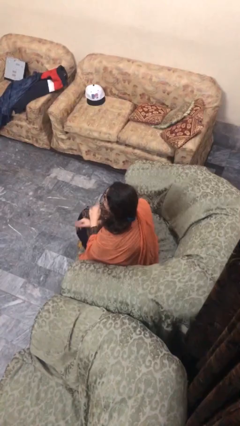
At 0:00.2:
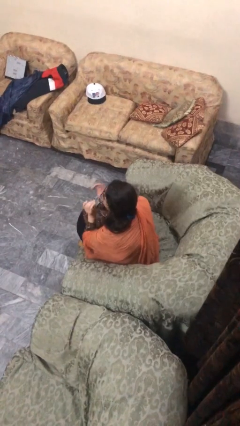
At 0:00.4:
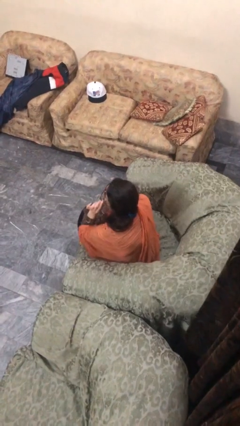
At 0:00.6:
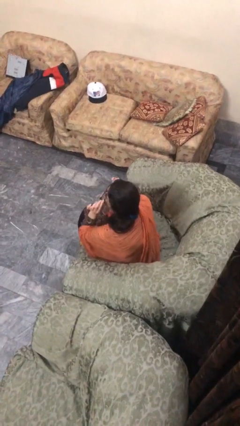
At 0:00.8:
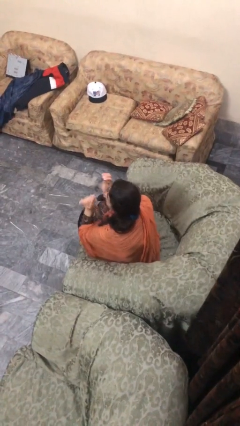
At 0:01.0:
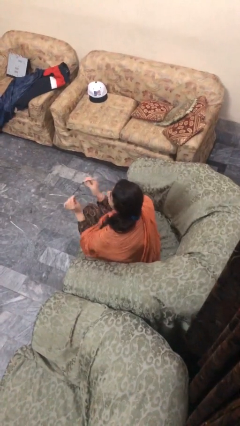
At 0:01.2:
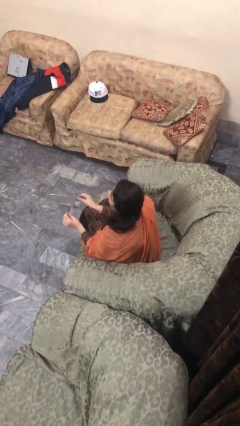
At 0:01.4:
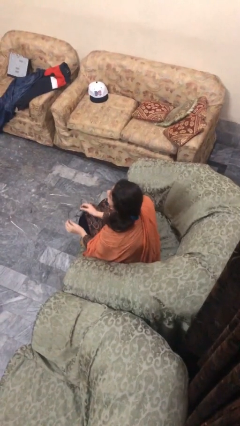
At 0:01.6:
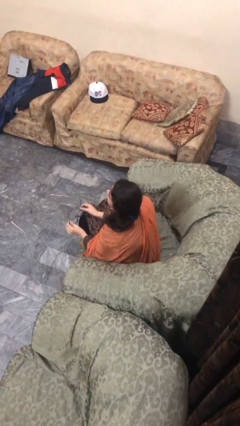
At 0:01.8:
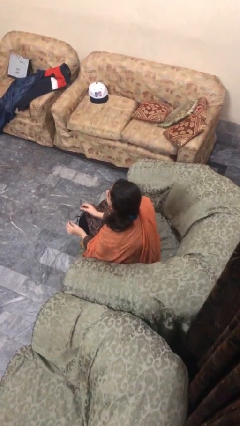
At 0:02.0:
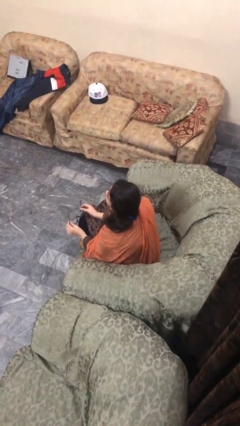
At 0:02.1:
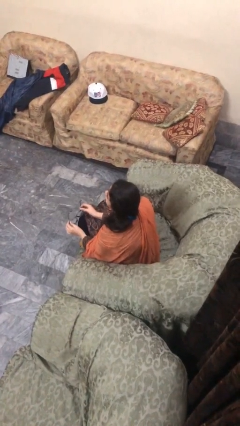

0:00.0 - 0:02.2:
person takes off glasses

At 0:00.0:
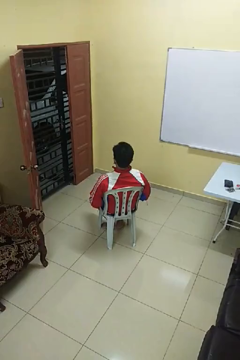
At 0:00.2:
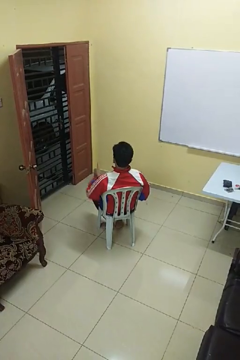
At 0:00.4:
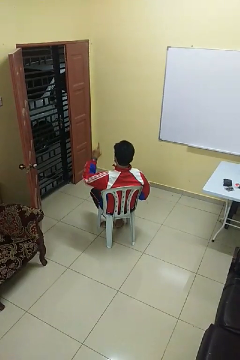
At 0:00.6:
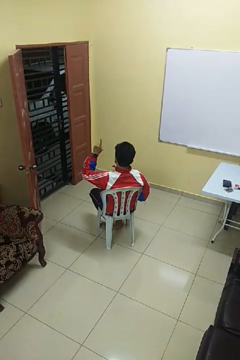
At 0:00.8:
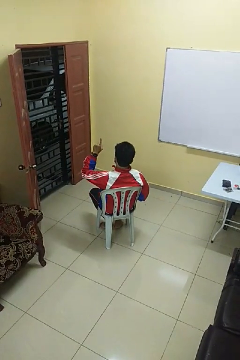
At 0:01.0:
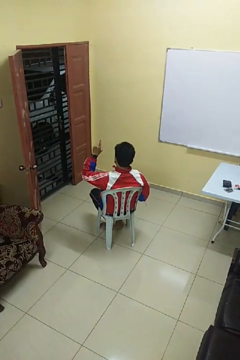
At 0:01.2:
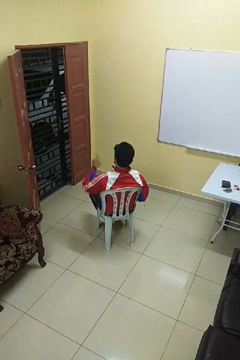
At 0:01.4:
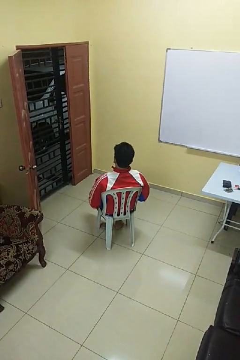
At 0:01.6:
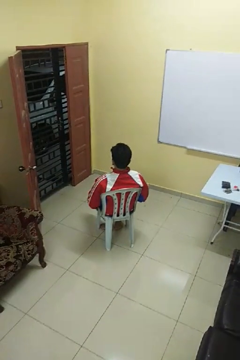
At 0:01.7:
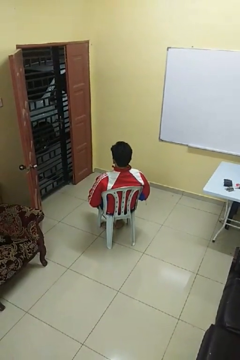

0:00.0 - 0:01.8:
person gestures number one

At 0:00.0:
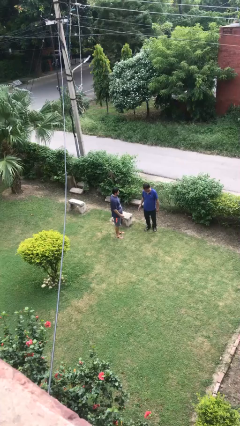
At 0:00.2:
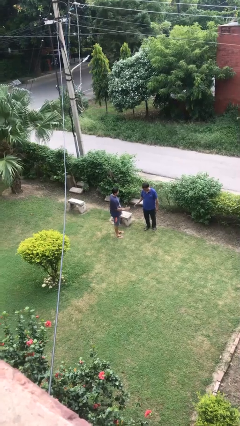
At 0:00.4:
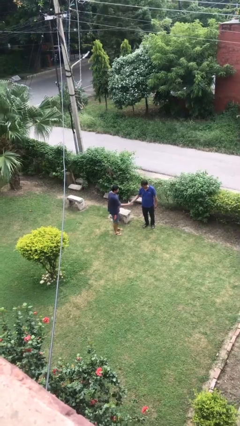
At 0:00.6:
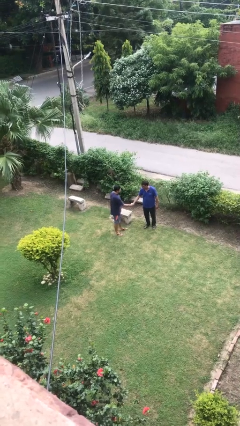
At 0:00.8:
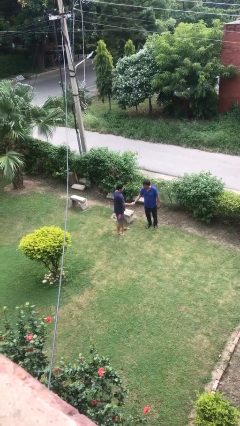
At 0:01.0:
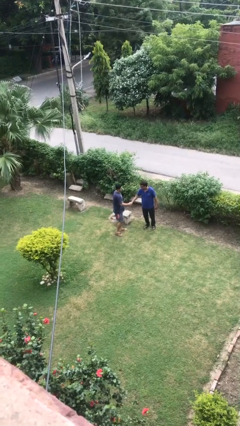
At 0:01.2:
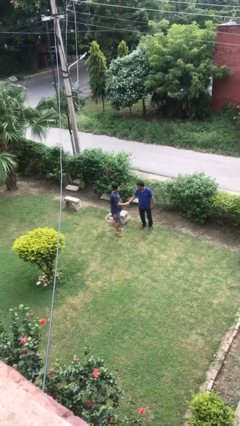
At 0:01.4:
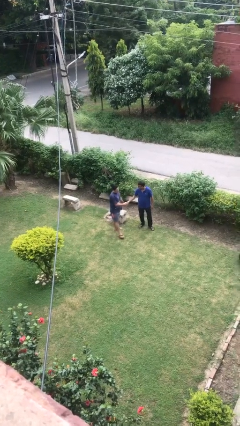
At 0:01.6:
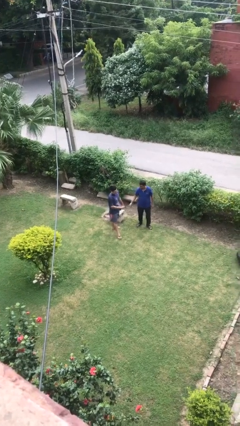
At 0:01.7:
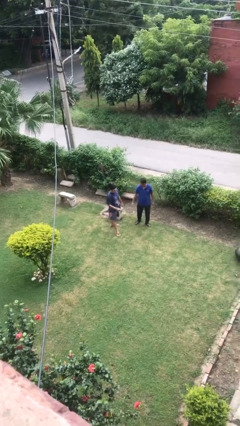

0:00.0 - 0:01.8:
person shakes hand

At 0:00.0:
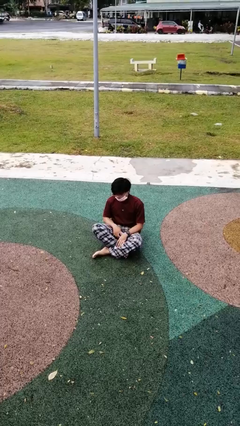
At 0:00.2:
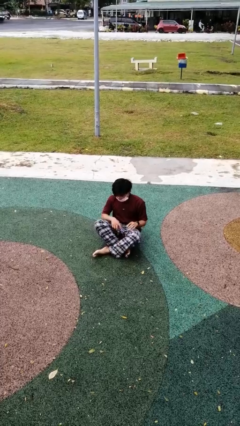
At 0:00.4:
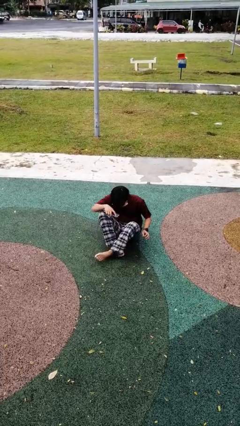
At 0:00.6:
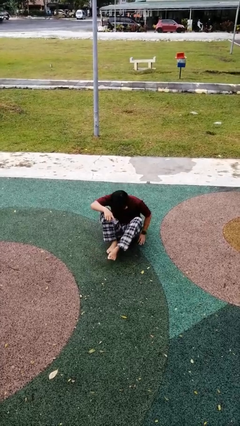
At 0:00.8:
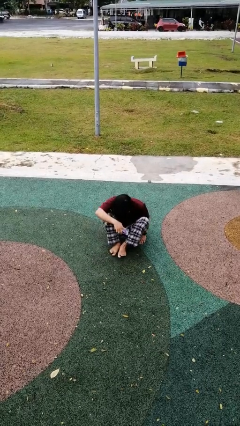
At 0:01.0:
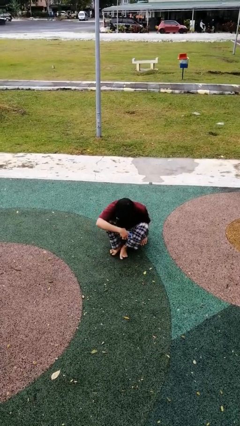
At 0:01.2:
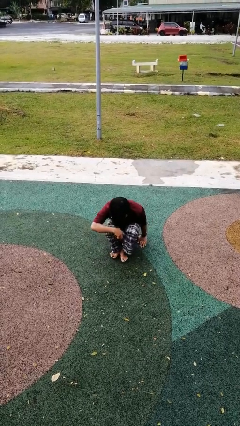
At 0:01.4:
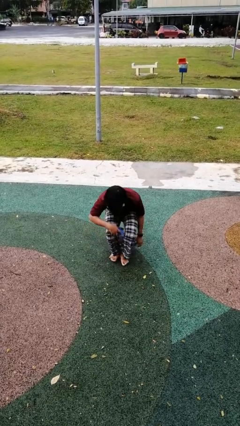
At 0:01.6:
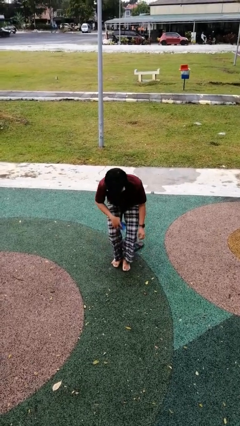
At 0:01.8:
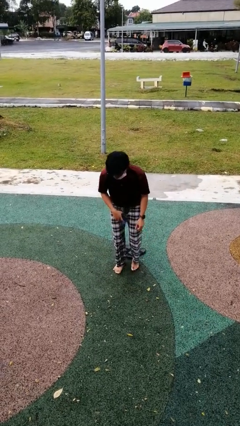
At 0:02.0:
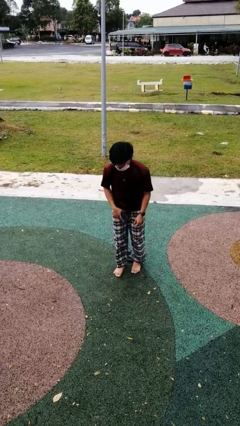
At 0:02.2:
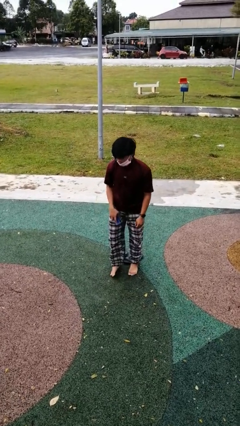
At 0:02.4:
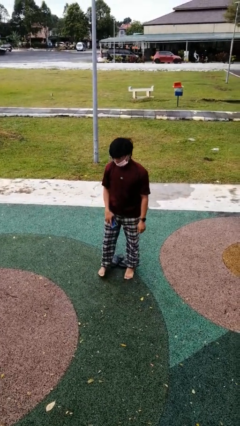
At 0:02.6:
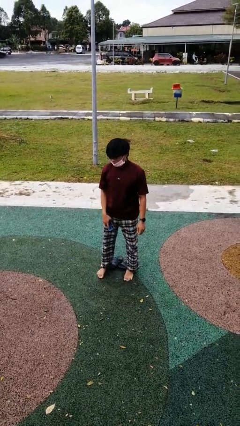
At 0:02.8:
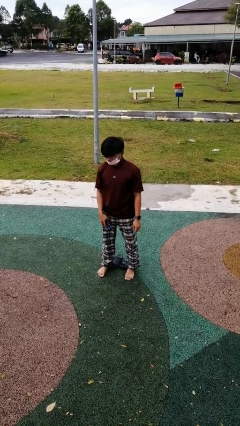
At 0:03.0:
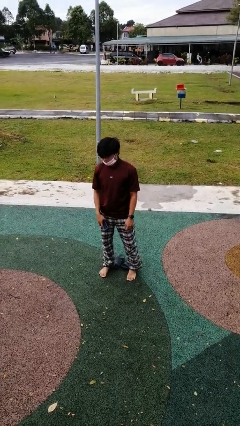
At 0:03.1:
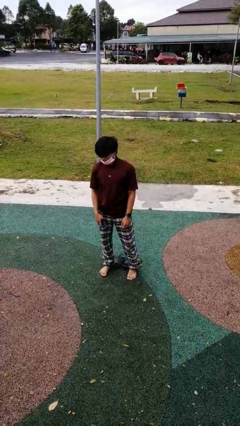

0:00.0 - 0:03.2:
person stands up from floor

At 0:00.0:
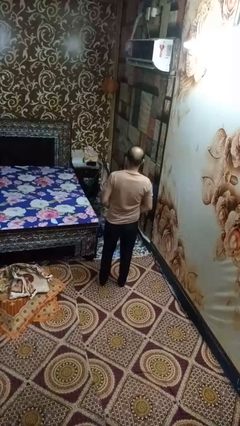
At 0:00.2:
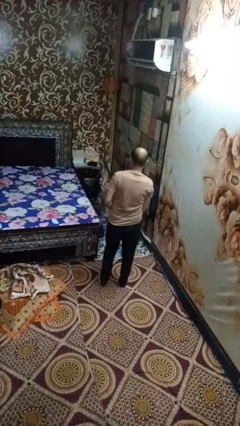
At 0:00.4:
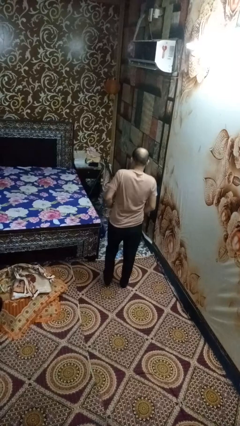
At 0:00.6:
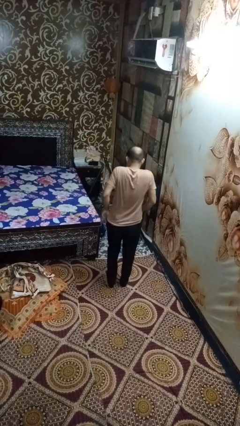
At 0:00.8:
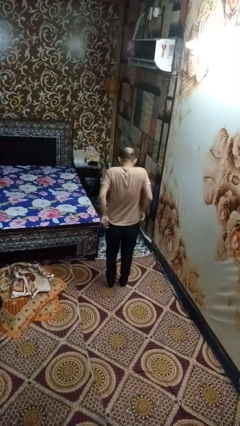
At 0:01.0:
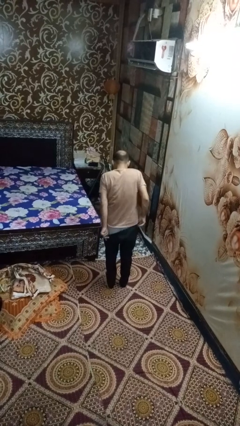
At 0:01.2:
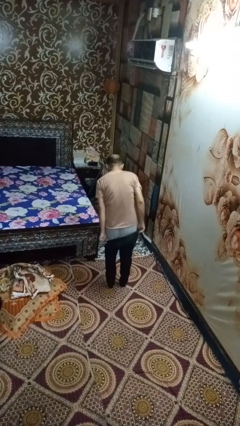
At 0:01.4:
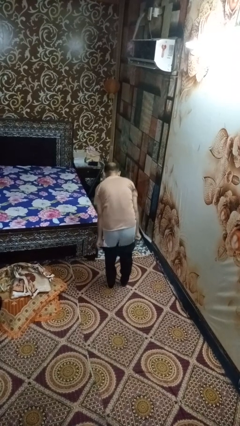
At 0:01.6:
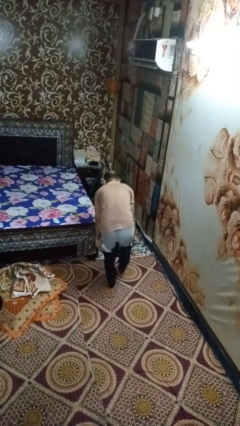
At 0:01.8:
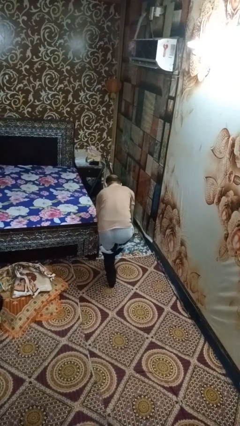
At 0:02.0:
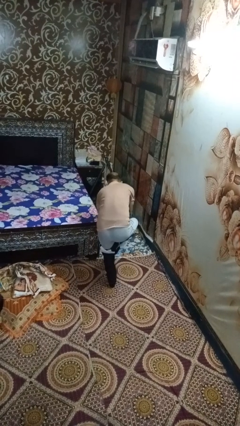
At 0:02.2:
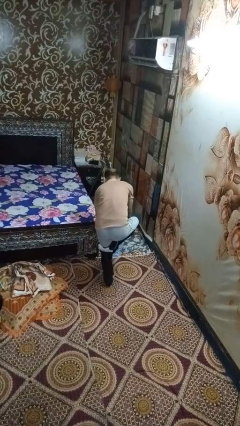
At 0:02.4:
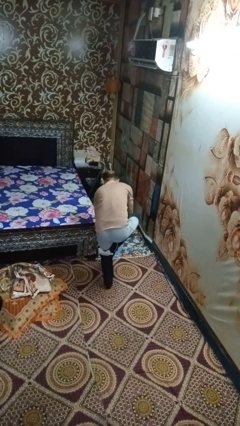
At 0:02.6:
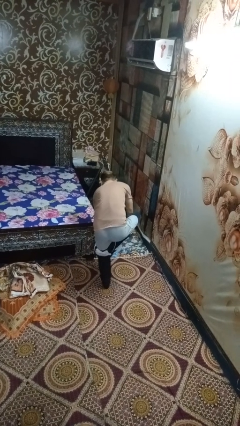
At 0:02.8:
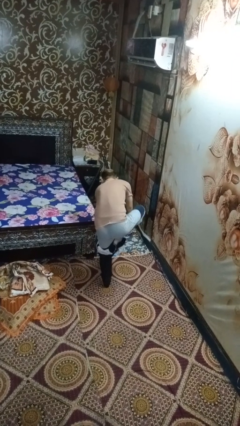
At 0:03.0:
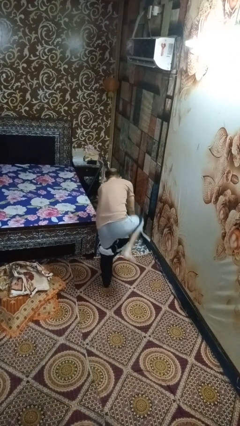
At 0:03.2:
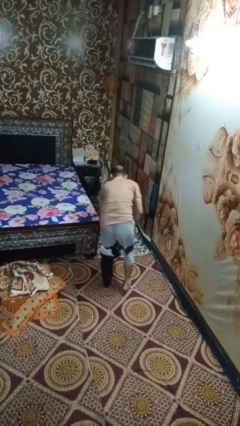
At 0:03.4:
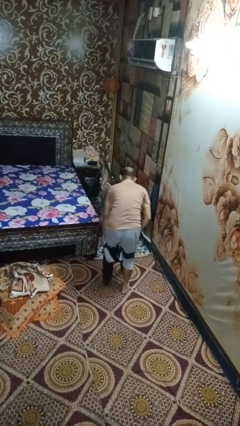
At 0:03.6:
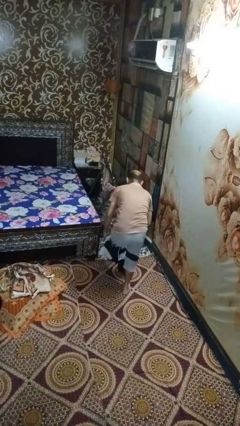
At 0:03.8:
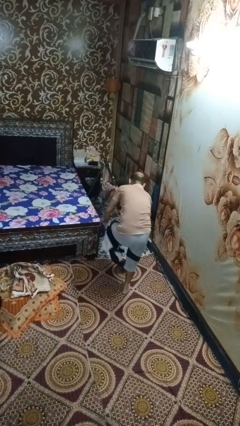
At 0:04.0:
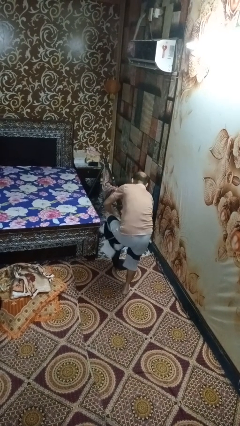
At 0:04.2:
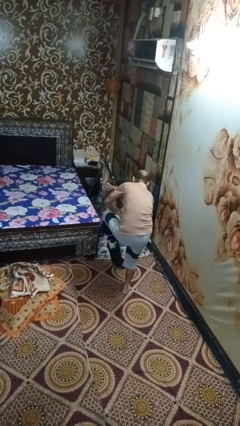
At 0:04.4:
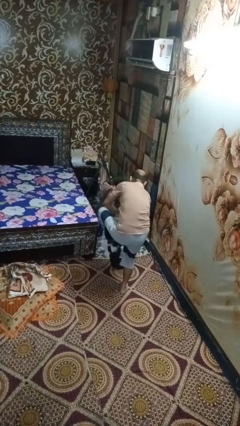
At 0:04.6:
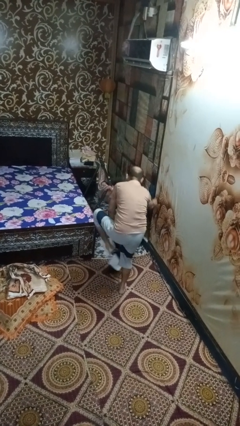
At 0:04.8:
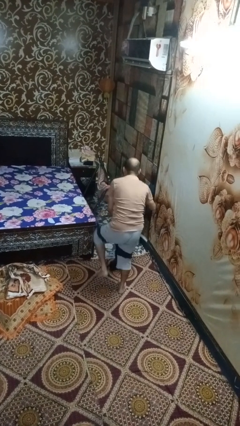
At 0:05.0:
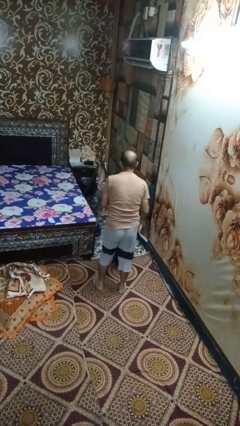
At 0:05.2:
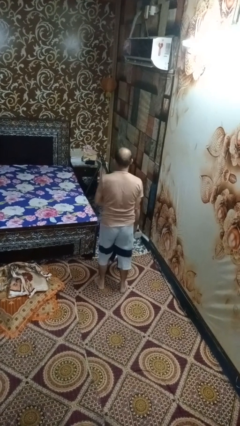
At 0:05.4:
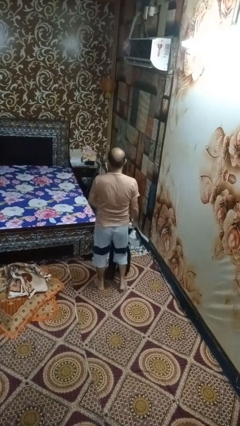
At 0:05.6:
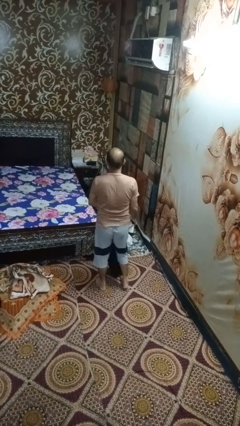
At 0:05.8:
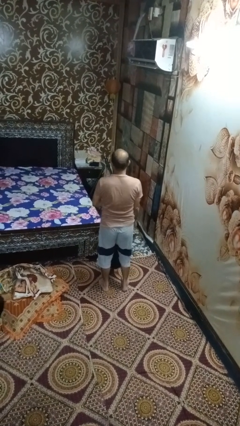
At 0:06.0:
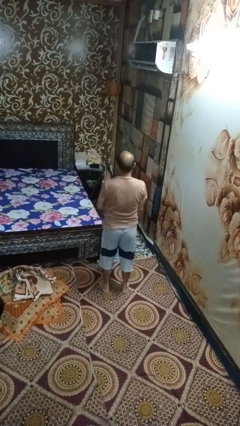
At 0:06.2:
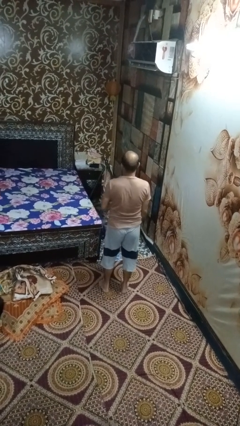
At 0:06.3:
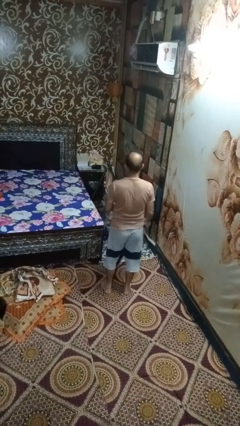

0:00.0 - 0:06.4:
person takes off pants

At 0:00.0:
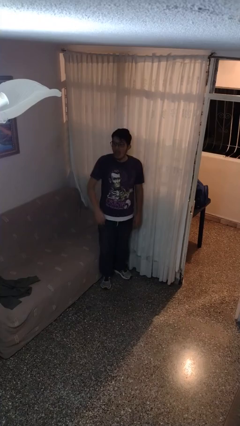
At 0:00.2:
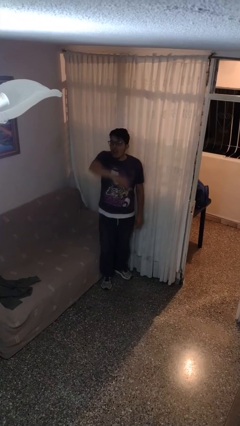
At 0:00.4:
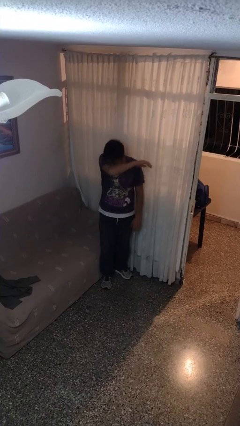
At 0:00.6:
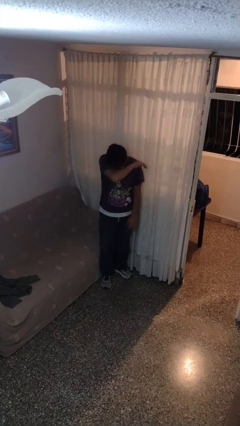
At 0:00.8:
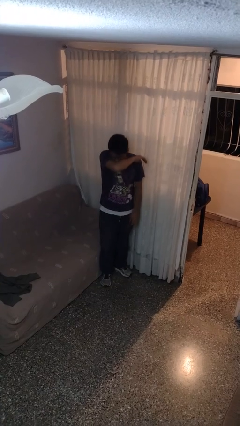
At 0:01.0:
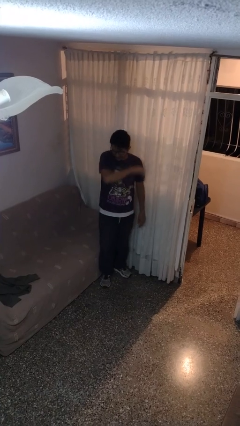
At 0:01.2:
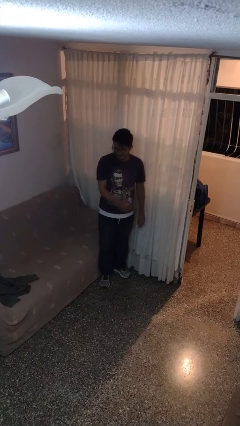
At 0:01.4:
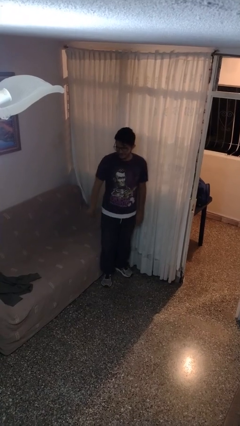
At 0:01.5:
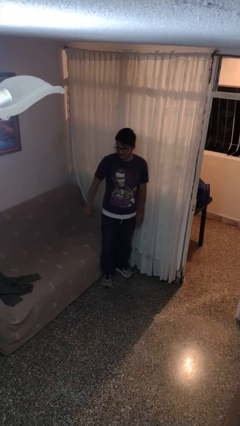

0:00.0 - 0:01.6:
person sneezes into arm

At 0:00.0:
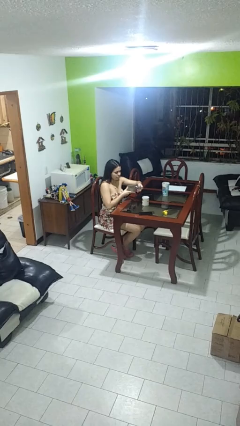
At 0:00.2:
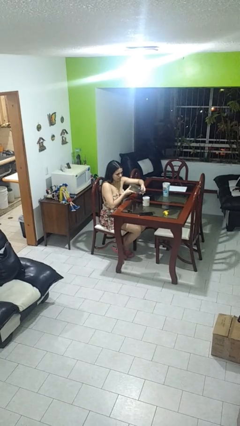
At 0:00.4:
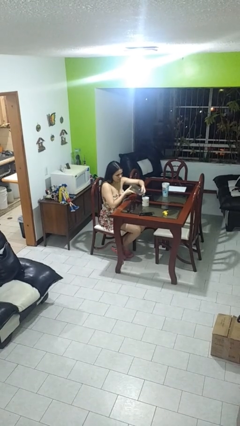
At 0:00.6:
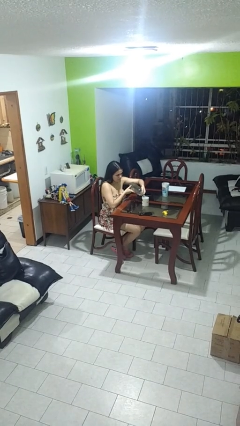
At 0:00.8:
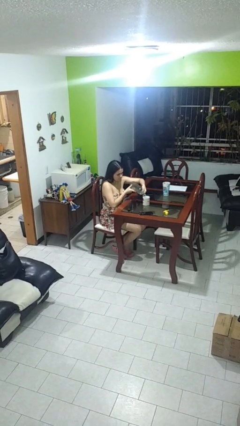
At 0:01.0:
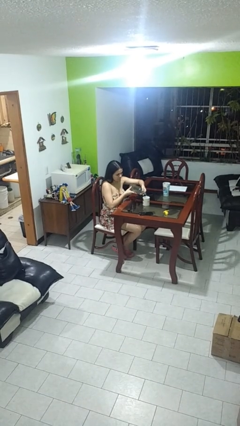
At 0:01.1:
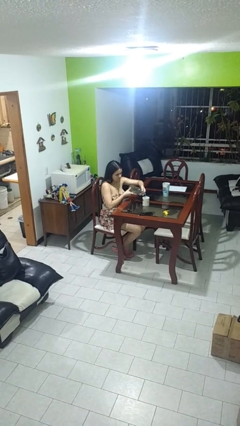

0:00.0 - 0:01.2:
person pours liquid into cup
